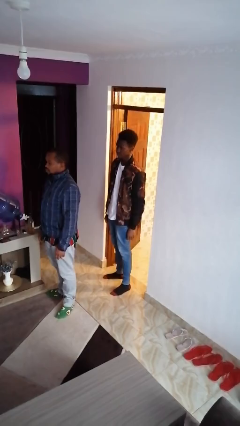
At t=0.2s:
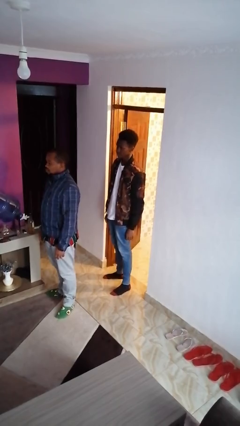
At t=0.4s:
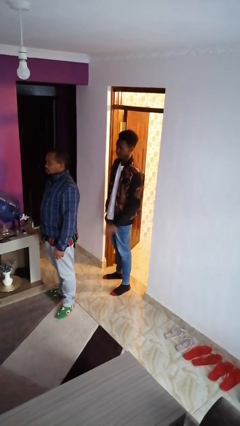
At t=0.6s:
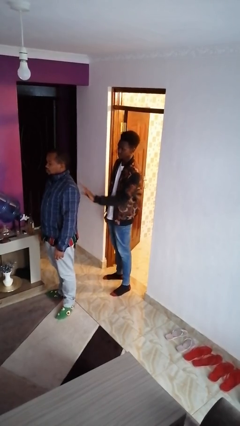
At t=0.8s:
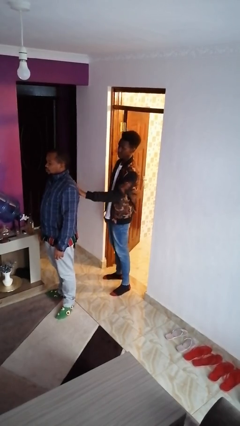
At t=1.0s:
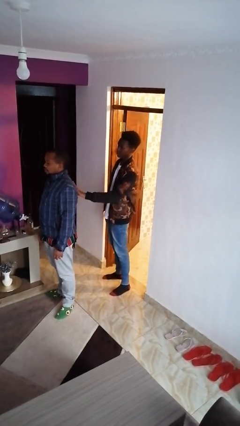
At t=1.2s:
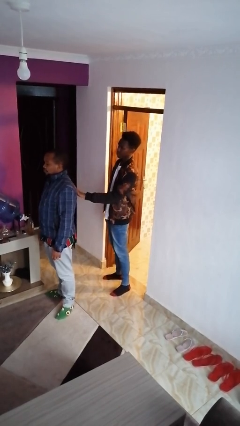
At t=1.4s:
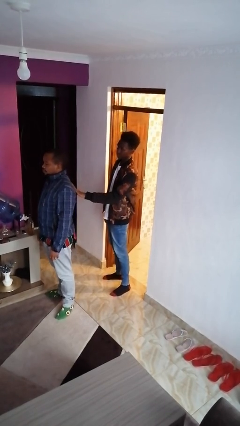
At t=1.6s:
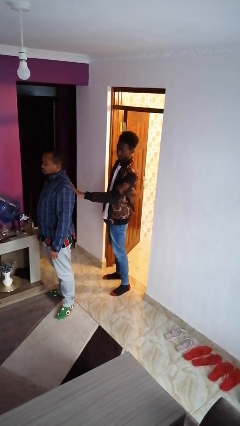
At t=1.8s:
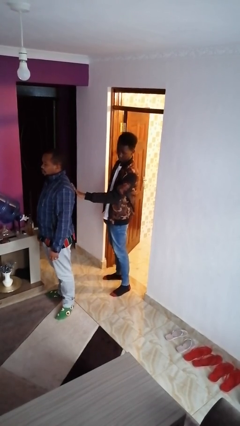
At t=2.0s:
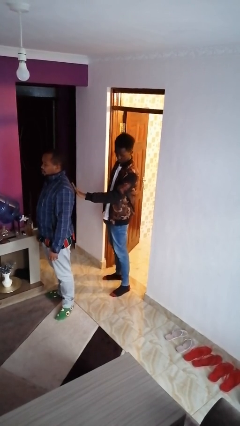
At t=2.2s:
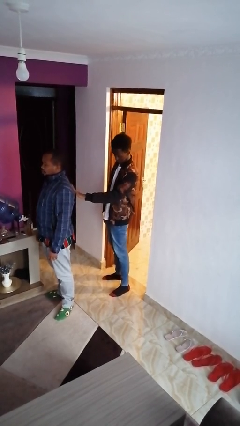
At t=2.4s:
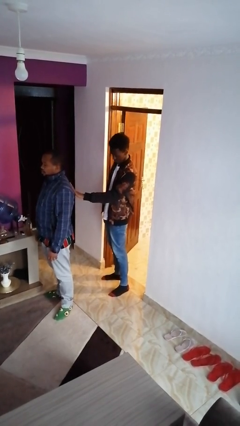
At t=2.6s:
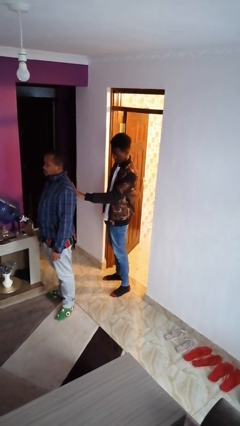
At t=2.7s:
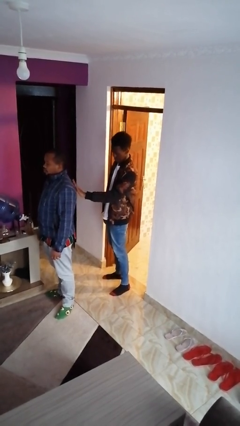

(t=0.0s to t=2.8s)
person touches back of person

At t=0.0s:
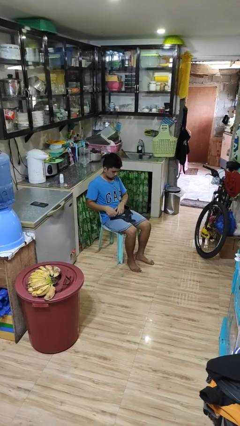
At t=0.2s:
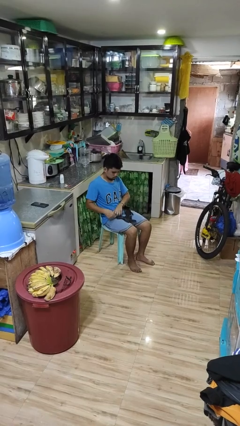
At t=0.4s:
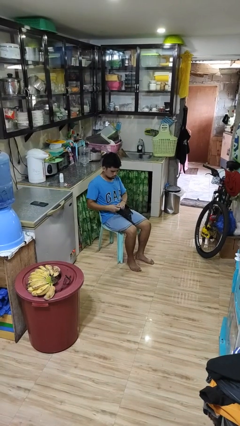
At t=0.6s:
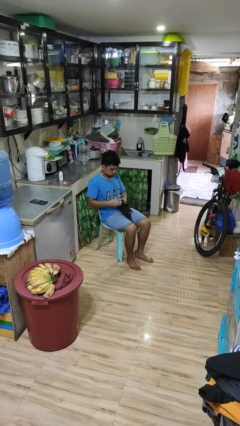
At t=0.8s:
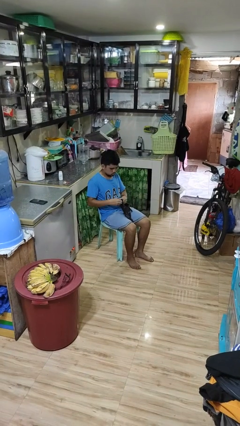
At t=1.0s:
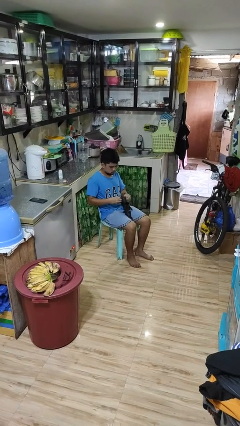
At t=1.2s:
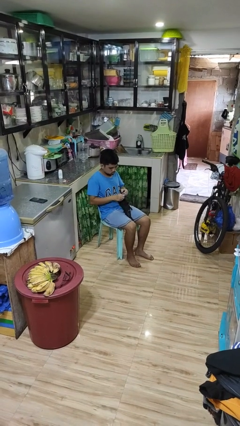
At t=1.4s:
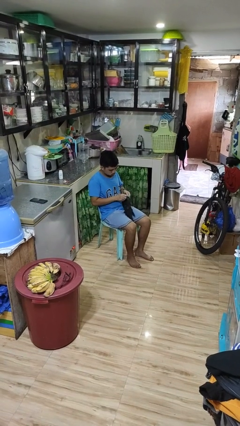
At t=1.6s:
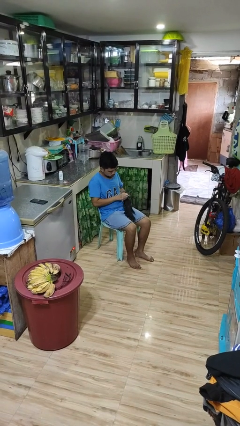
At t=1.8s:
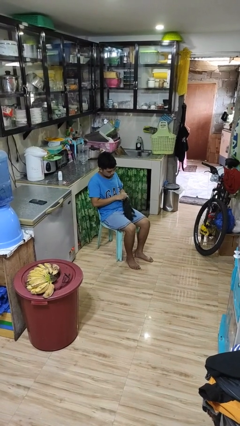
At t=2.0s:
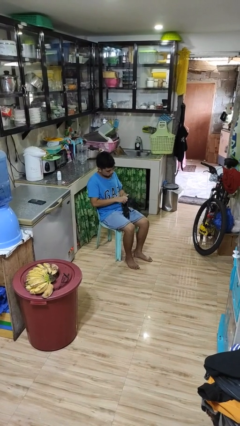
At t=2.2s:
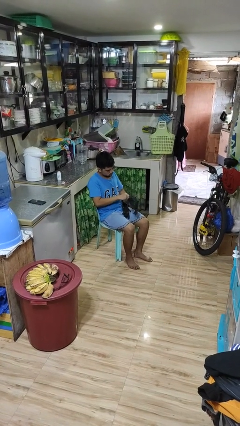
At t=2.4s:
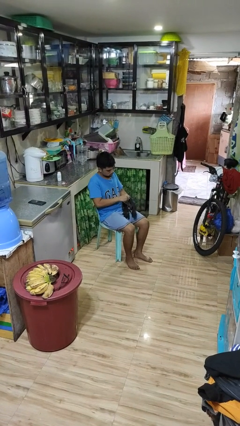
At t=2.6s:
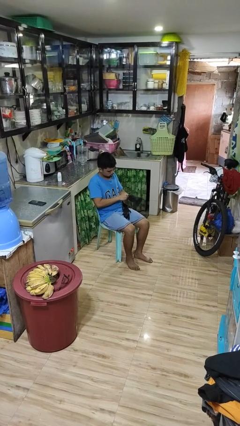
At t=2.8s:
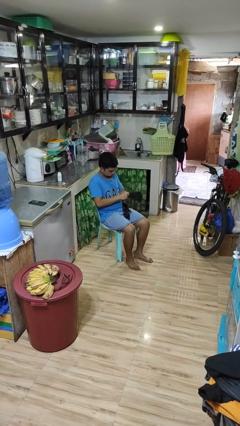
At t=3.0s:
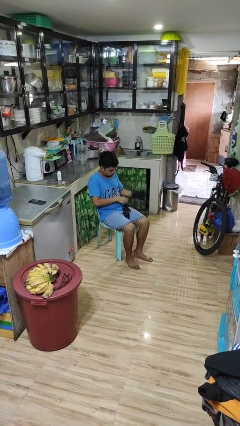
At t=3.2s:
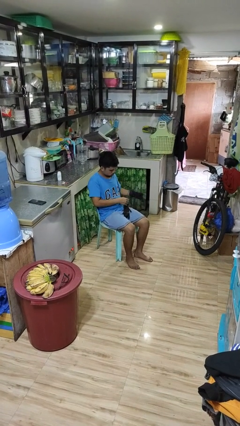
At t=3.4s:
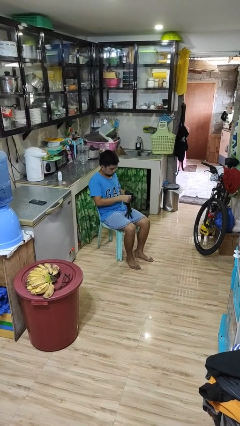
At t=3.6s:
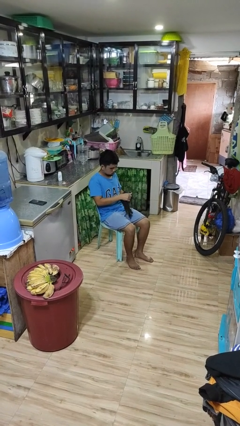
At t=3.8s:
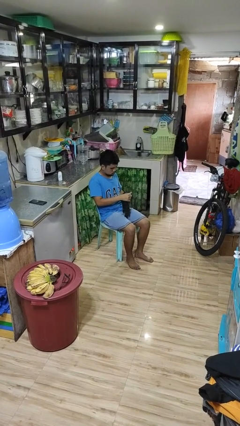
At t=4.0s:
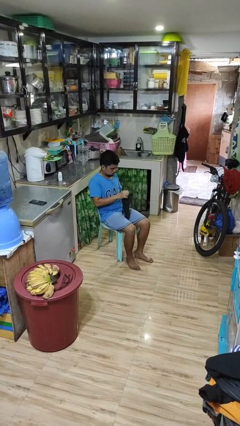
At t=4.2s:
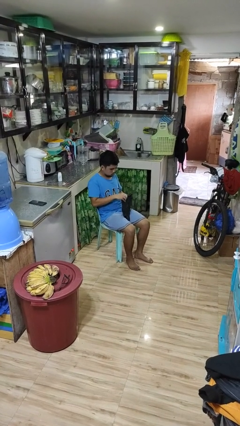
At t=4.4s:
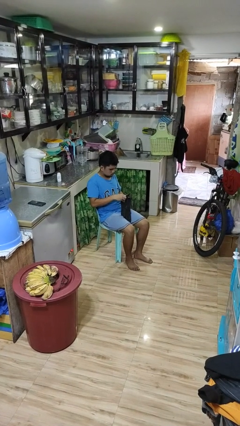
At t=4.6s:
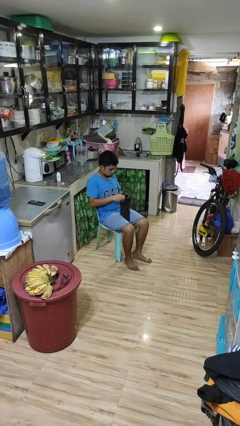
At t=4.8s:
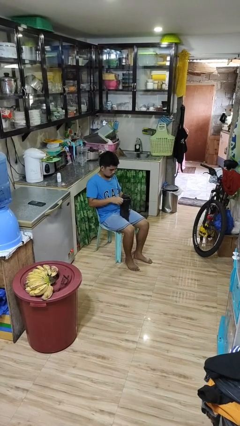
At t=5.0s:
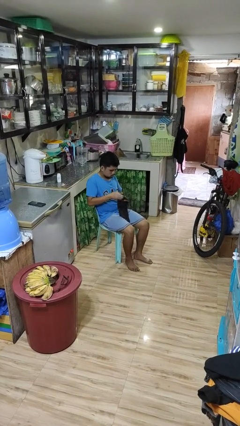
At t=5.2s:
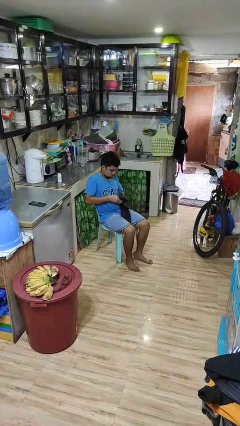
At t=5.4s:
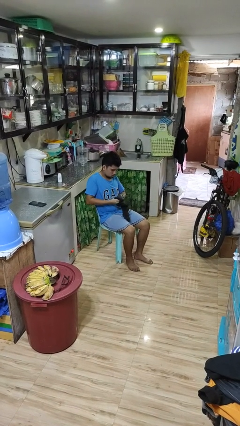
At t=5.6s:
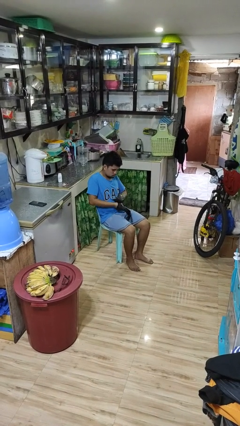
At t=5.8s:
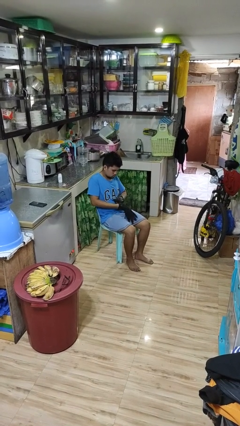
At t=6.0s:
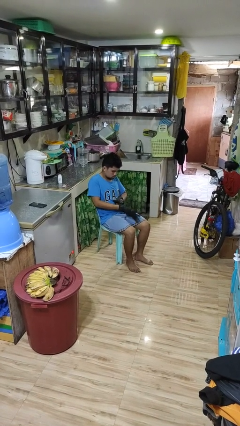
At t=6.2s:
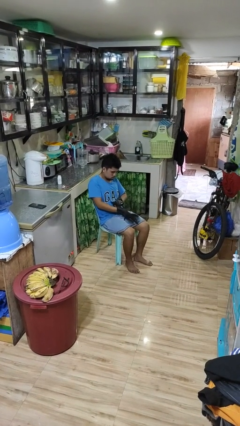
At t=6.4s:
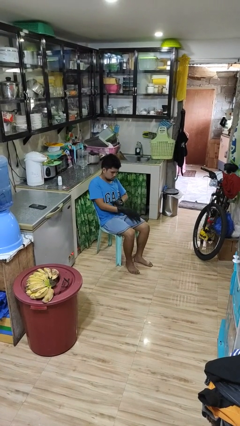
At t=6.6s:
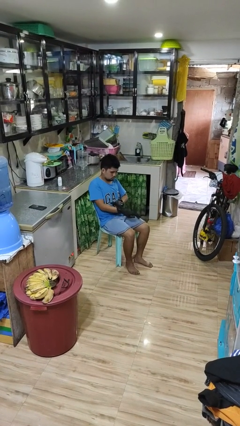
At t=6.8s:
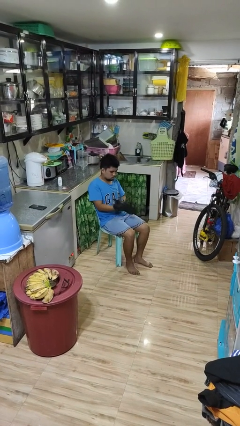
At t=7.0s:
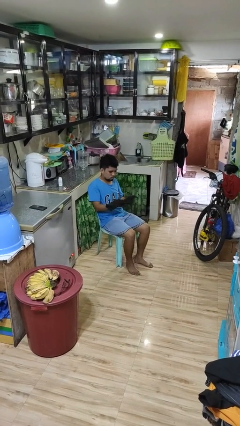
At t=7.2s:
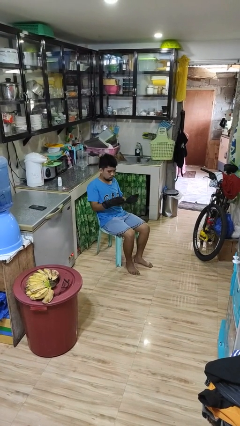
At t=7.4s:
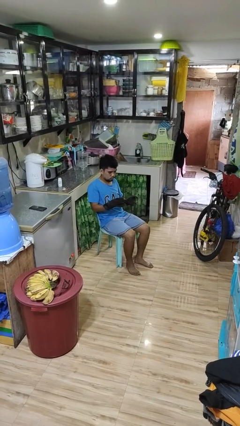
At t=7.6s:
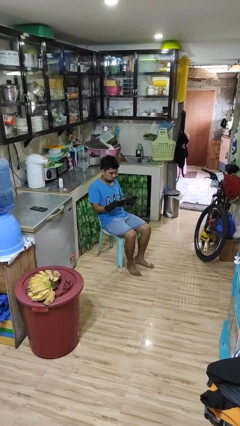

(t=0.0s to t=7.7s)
person puts on gloves

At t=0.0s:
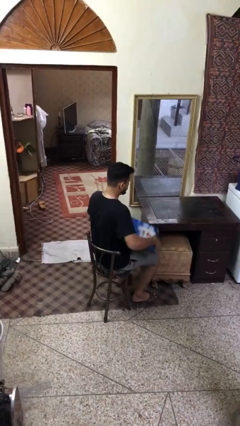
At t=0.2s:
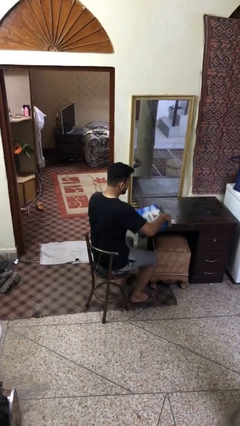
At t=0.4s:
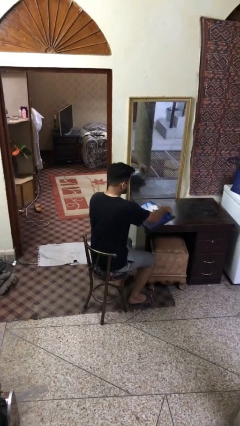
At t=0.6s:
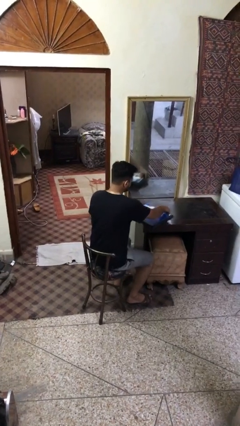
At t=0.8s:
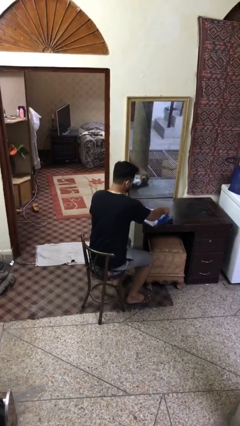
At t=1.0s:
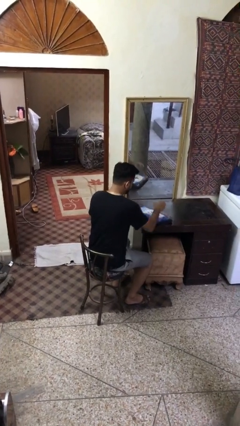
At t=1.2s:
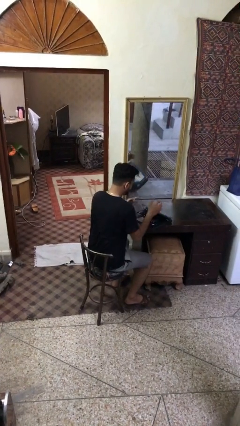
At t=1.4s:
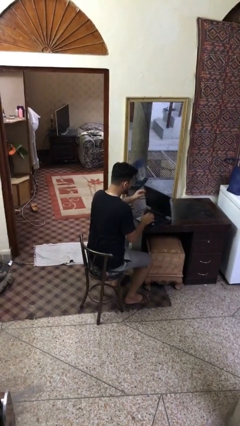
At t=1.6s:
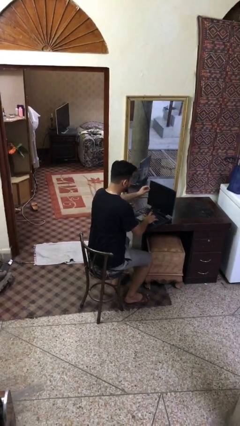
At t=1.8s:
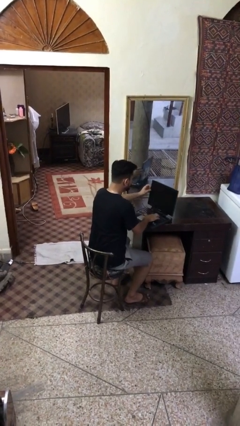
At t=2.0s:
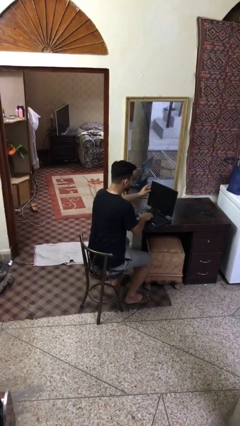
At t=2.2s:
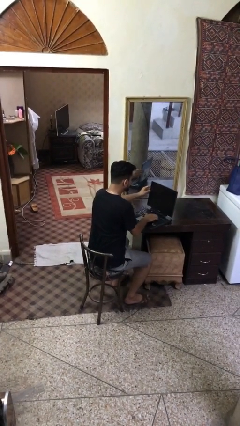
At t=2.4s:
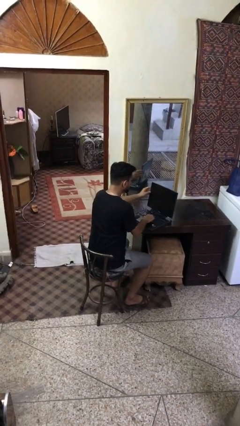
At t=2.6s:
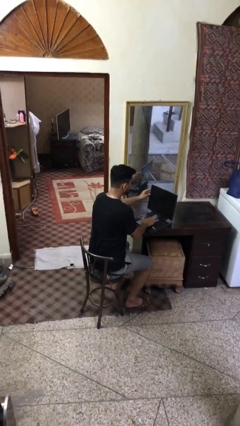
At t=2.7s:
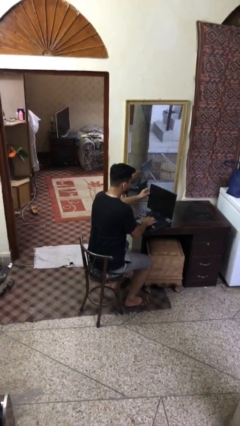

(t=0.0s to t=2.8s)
person interacts with laptop

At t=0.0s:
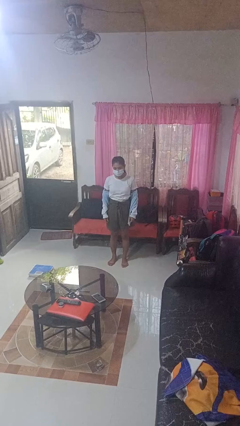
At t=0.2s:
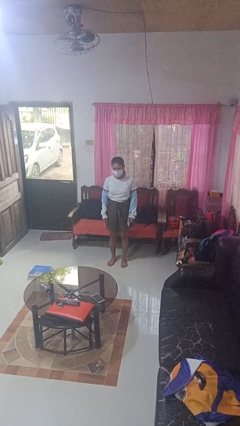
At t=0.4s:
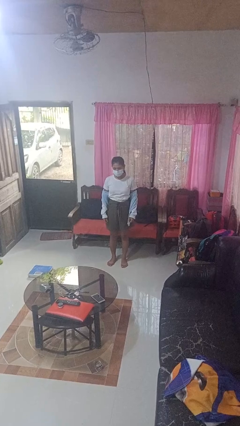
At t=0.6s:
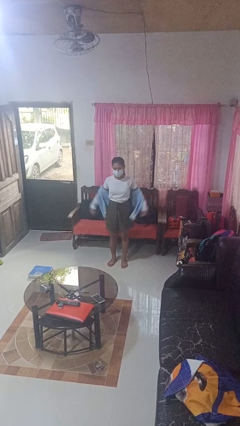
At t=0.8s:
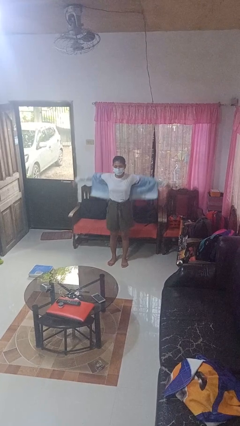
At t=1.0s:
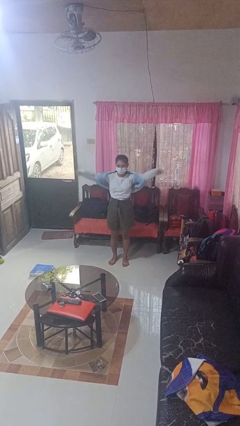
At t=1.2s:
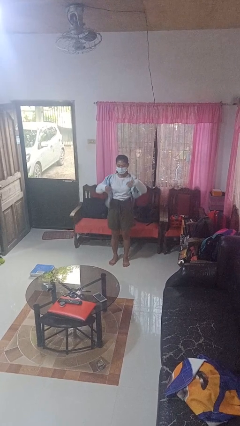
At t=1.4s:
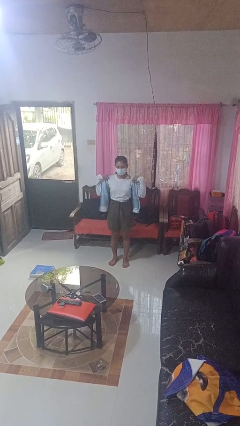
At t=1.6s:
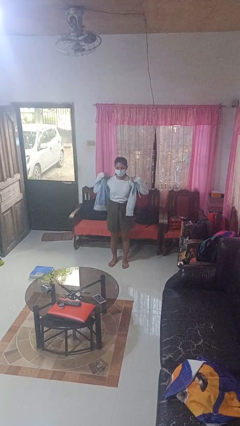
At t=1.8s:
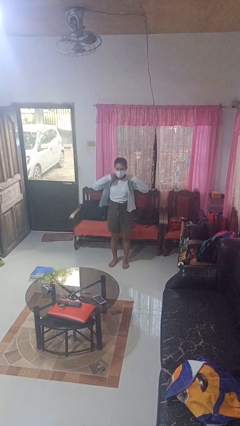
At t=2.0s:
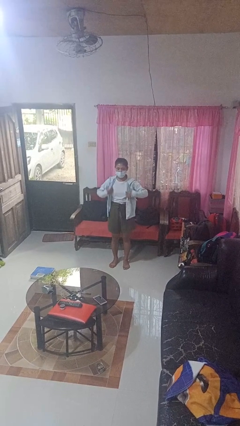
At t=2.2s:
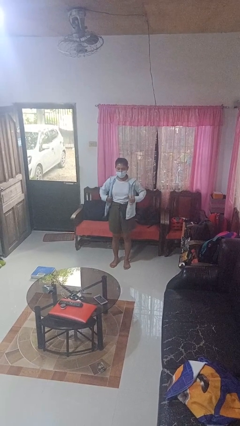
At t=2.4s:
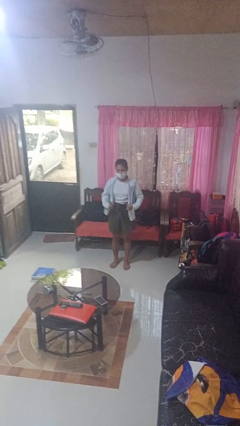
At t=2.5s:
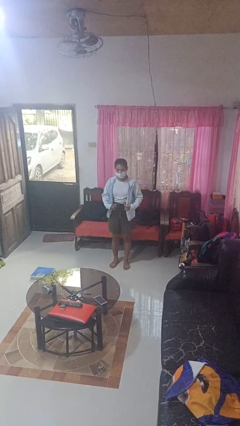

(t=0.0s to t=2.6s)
person puts on jacket

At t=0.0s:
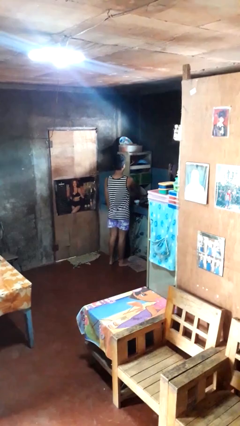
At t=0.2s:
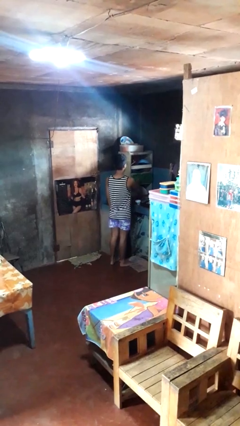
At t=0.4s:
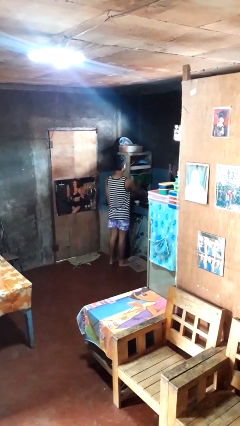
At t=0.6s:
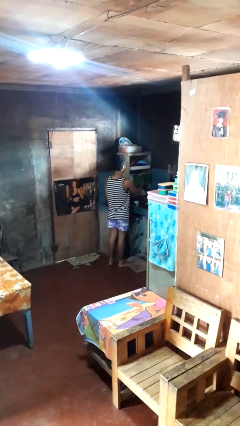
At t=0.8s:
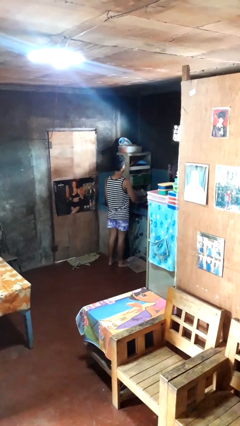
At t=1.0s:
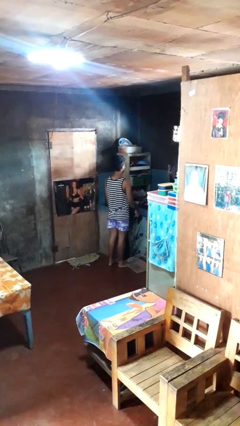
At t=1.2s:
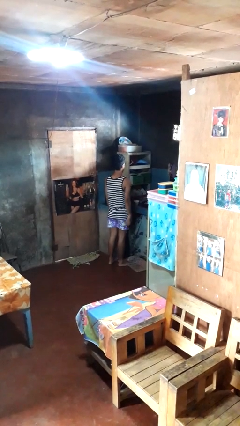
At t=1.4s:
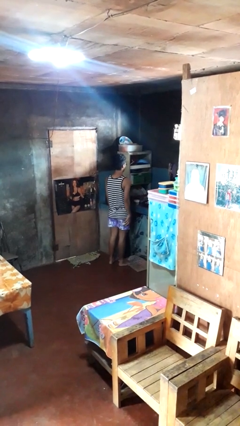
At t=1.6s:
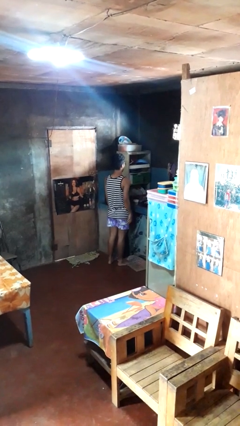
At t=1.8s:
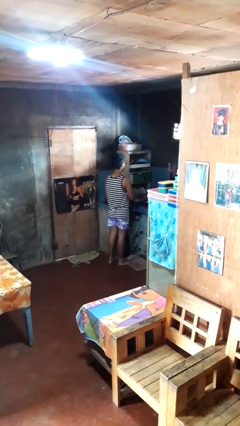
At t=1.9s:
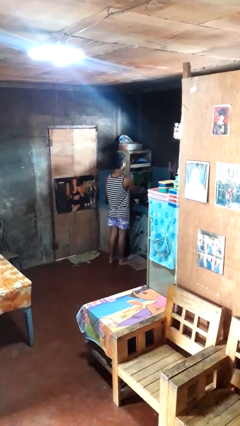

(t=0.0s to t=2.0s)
person opens kitchen drawer
